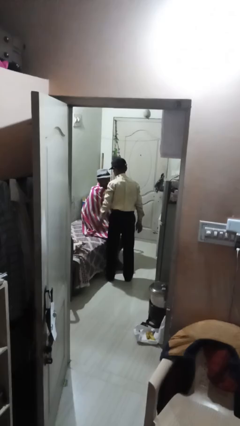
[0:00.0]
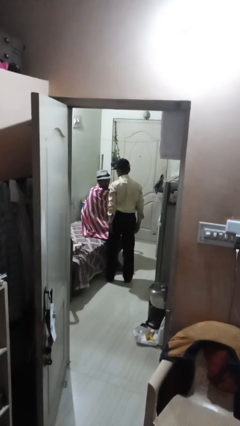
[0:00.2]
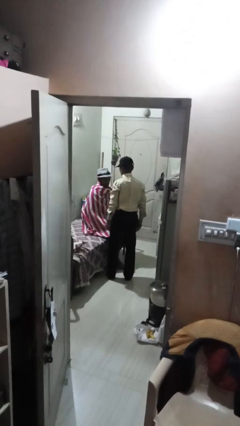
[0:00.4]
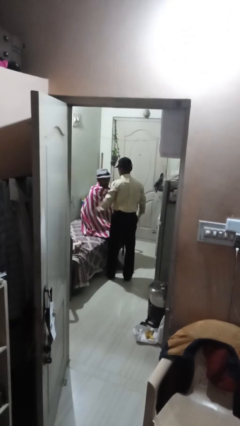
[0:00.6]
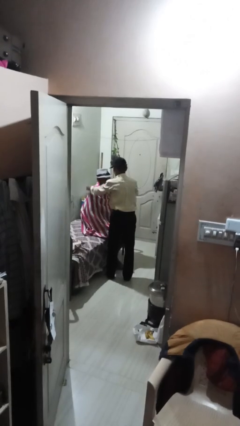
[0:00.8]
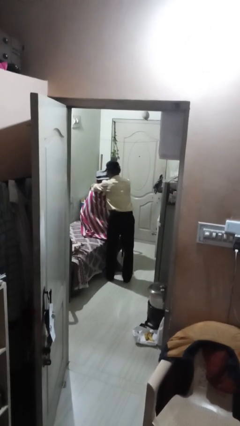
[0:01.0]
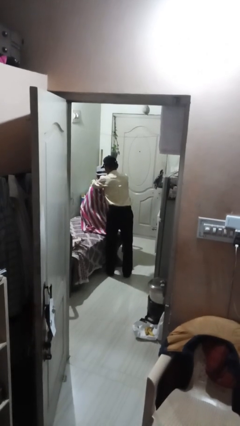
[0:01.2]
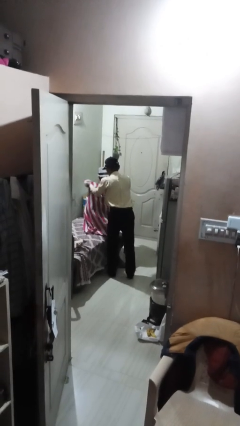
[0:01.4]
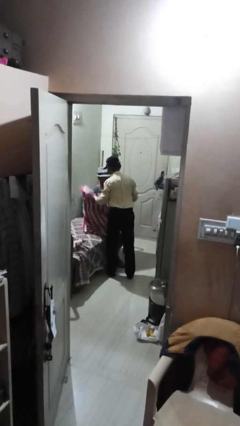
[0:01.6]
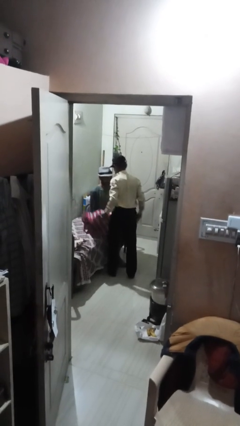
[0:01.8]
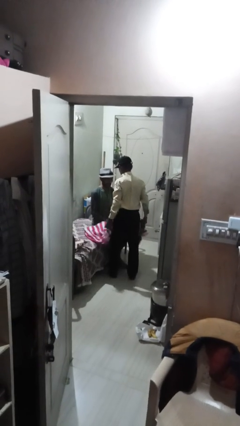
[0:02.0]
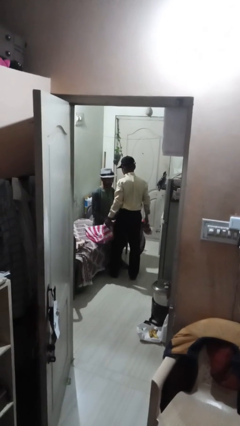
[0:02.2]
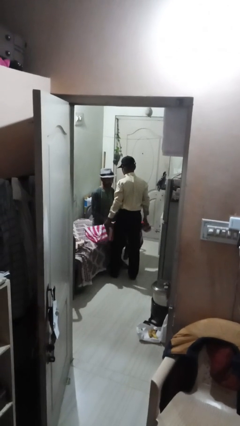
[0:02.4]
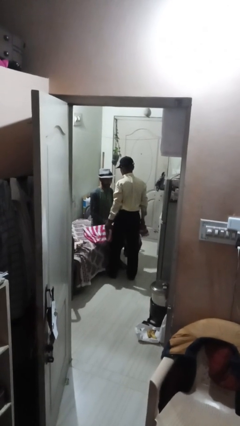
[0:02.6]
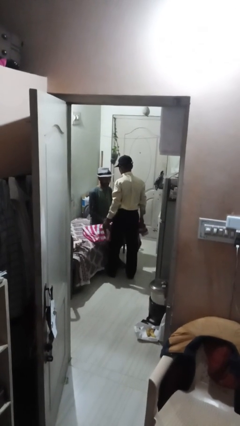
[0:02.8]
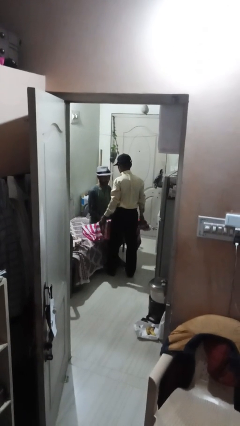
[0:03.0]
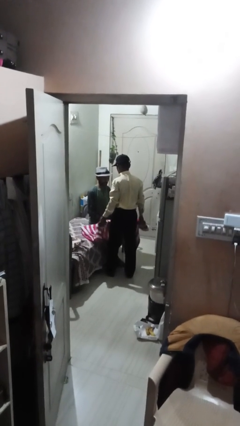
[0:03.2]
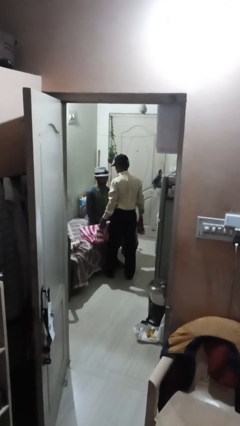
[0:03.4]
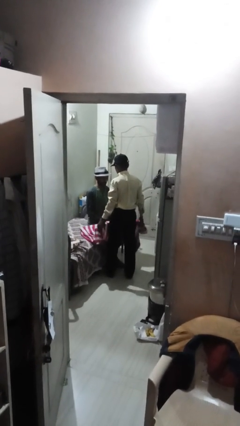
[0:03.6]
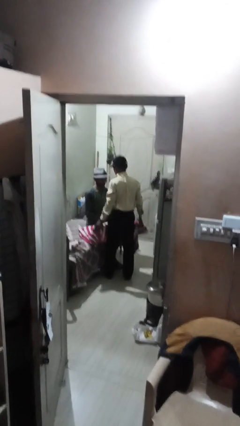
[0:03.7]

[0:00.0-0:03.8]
person uncovers friend with blanket

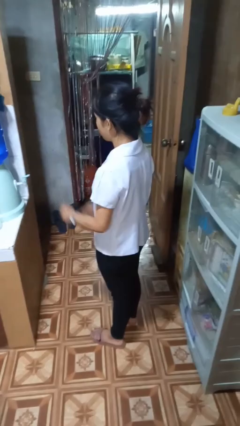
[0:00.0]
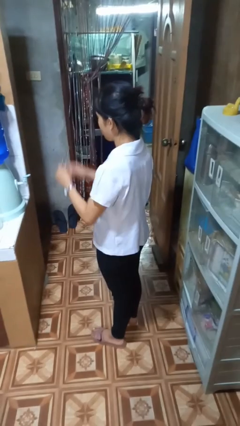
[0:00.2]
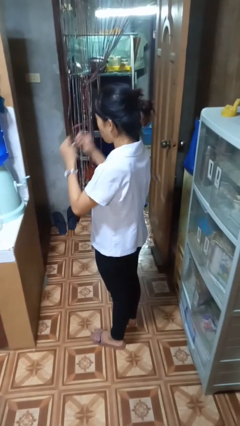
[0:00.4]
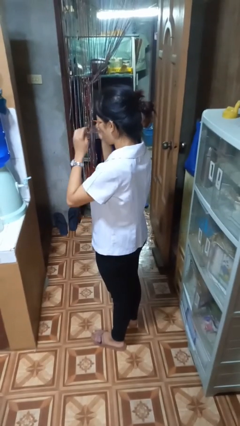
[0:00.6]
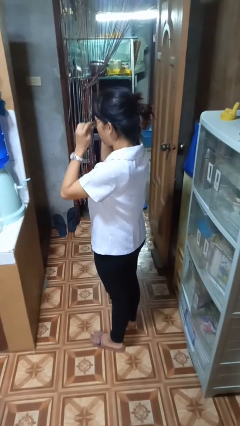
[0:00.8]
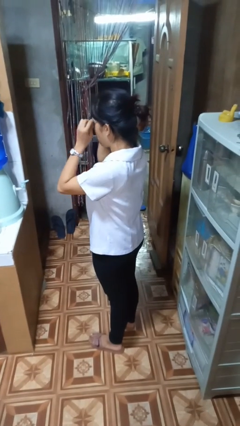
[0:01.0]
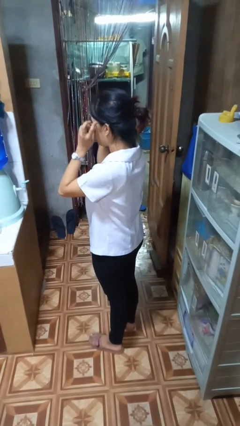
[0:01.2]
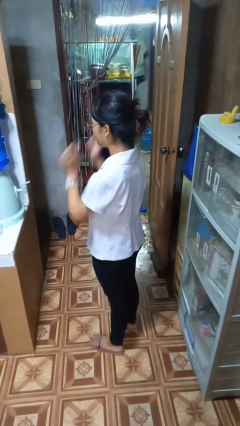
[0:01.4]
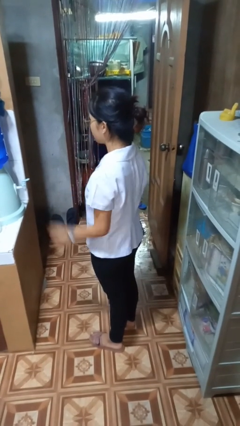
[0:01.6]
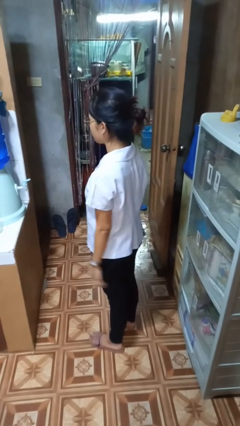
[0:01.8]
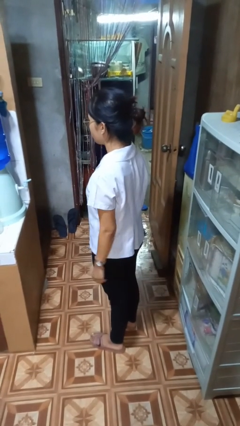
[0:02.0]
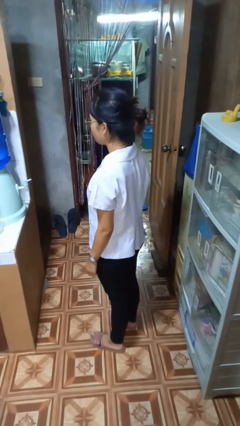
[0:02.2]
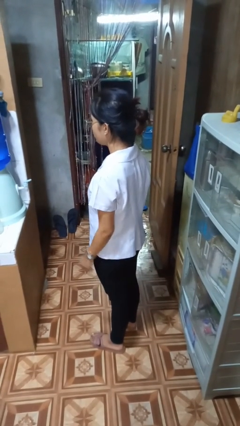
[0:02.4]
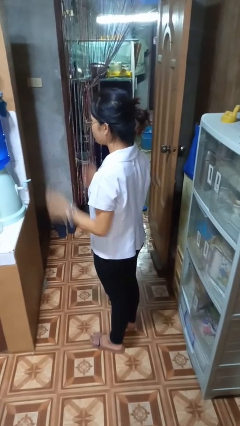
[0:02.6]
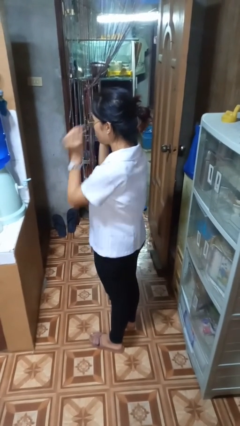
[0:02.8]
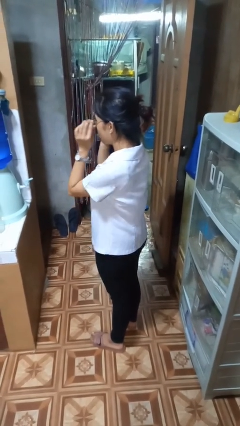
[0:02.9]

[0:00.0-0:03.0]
person puts on glasses

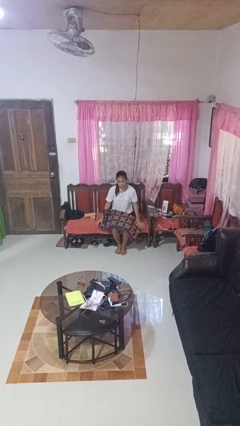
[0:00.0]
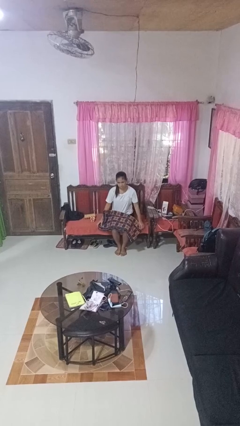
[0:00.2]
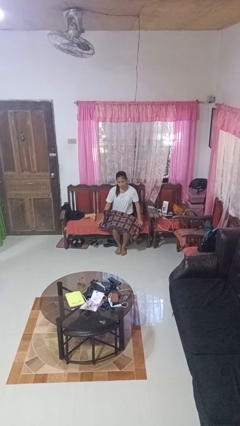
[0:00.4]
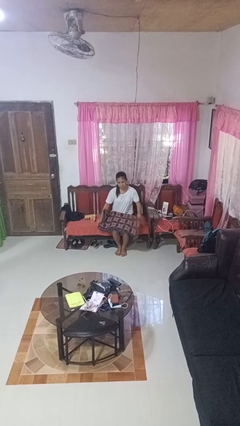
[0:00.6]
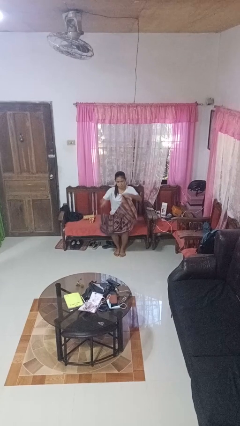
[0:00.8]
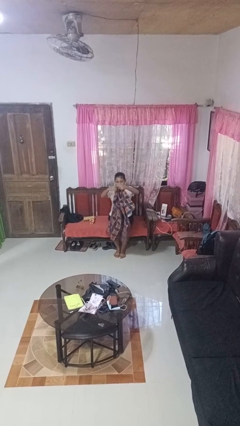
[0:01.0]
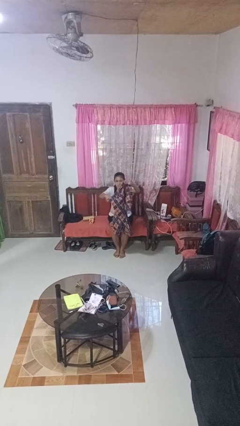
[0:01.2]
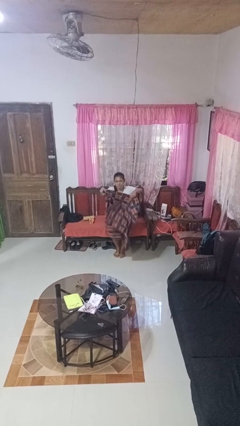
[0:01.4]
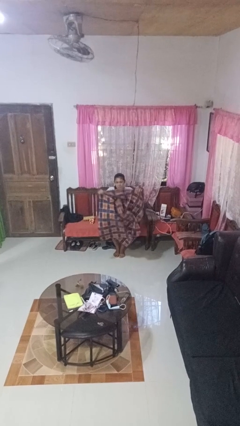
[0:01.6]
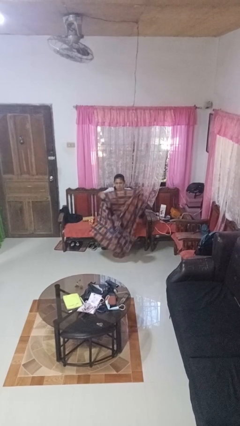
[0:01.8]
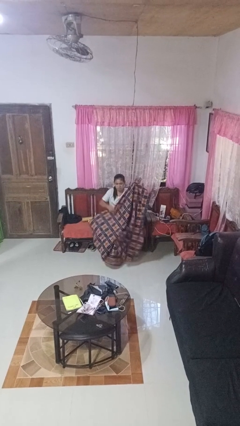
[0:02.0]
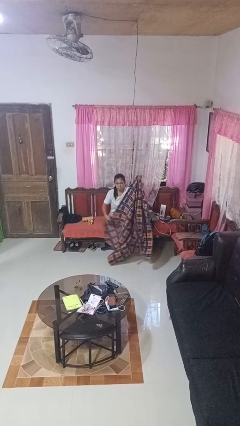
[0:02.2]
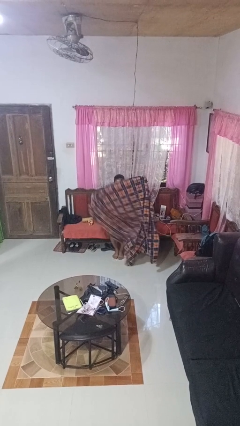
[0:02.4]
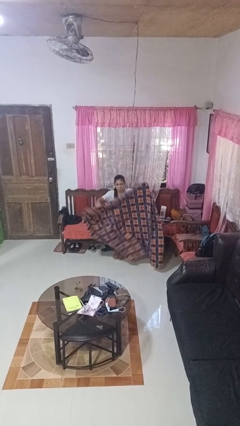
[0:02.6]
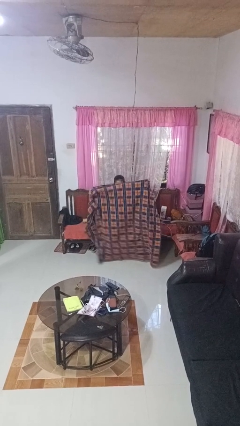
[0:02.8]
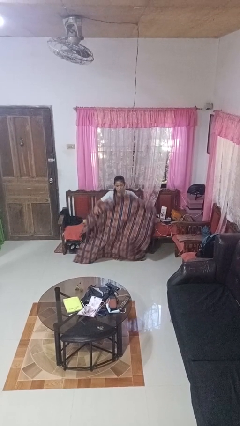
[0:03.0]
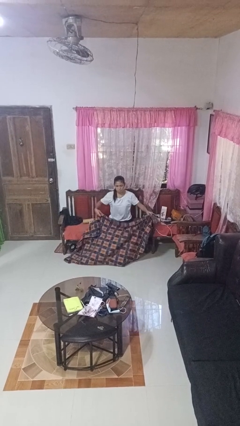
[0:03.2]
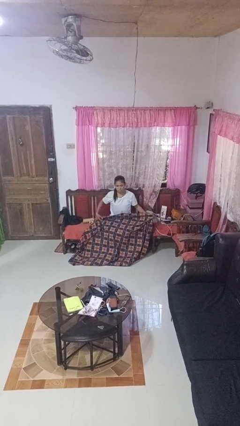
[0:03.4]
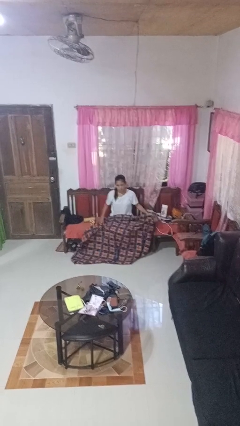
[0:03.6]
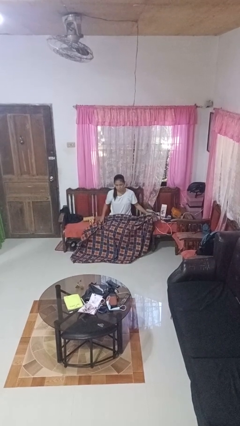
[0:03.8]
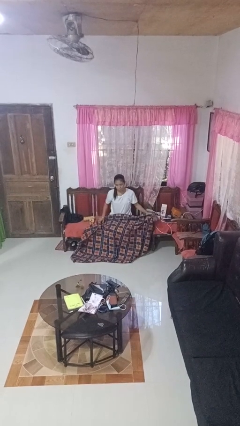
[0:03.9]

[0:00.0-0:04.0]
person unfolds blanket

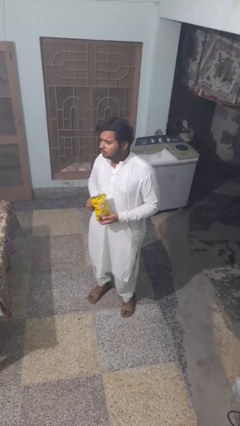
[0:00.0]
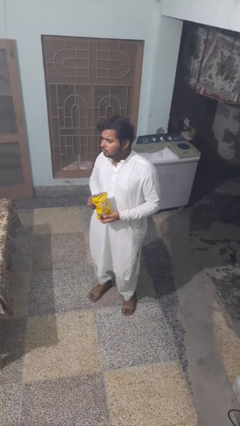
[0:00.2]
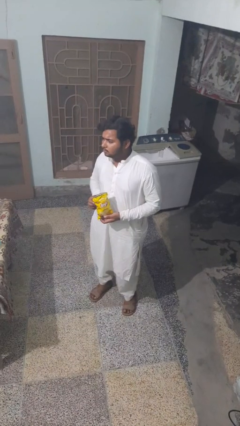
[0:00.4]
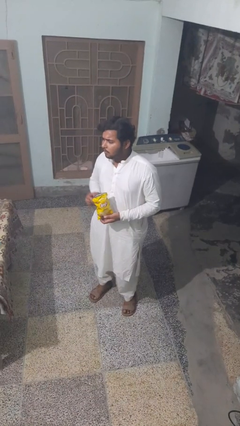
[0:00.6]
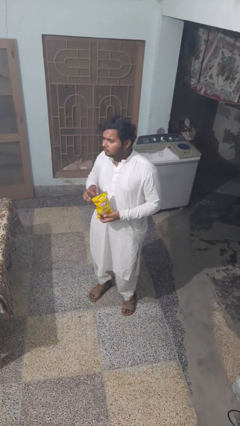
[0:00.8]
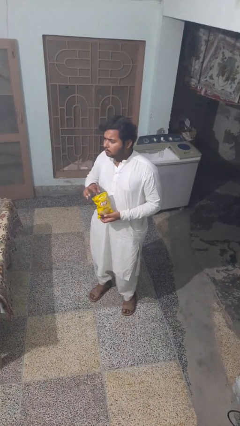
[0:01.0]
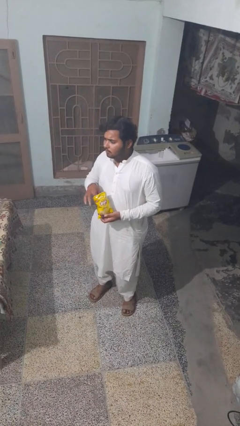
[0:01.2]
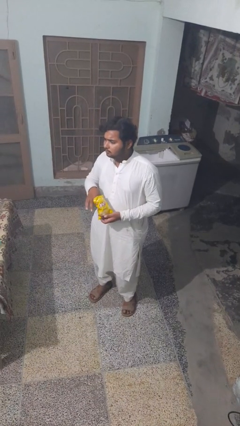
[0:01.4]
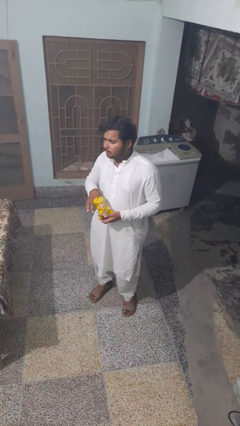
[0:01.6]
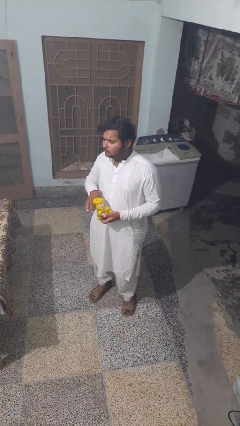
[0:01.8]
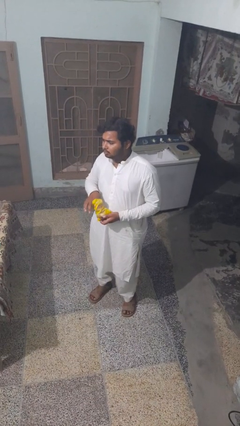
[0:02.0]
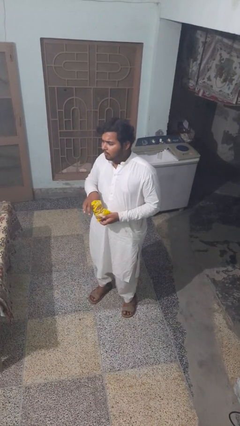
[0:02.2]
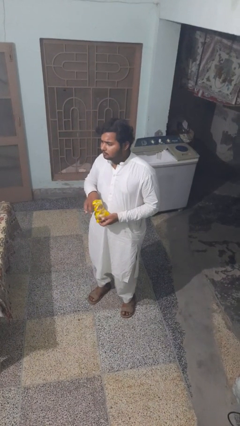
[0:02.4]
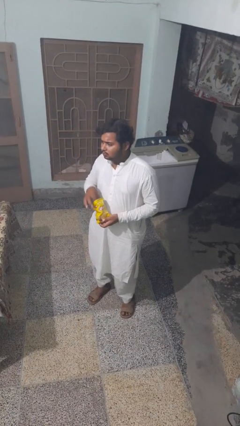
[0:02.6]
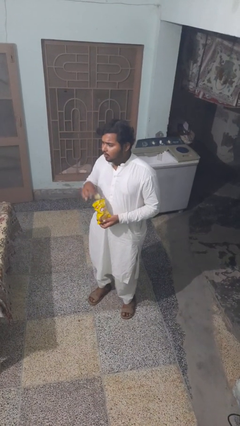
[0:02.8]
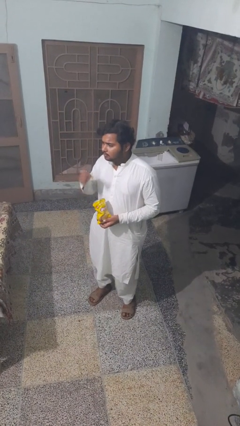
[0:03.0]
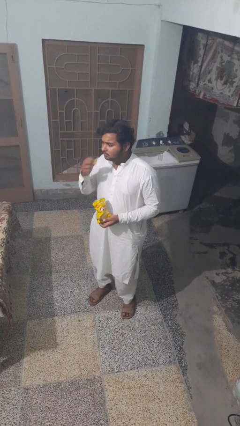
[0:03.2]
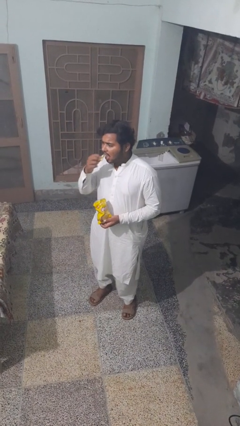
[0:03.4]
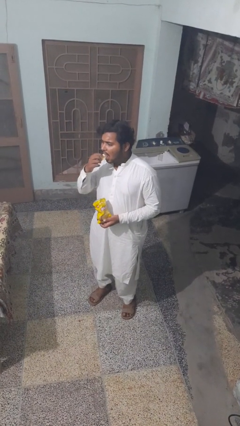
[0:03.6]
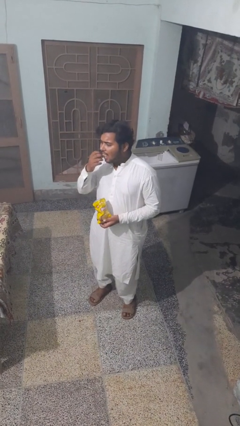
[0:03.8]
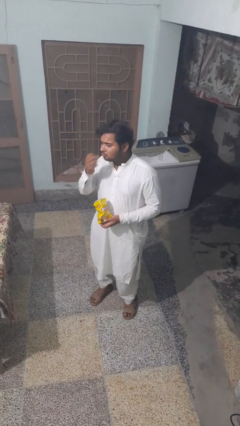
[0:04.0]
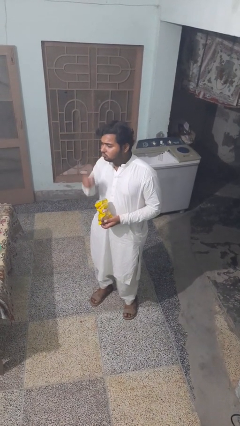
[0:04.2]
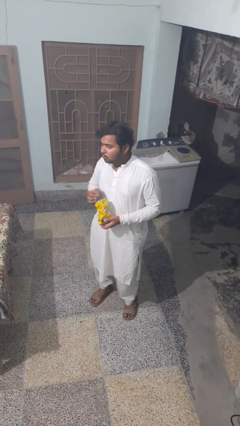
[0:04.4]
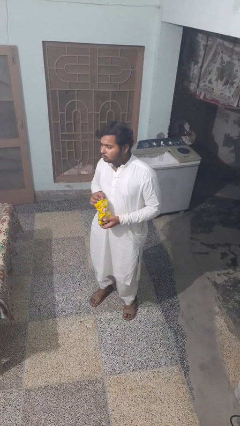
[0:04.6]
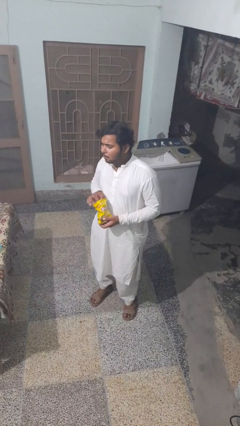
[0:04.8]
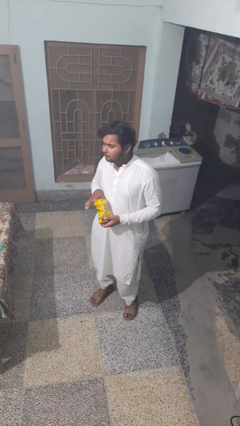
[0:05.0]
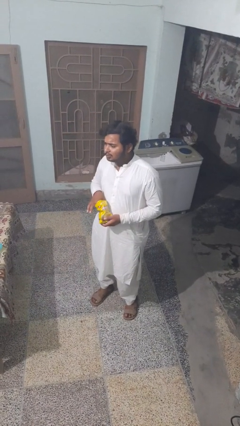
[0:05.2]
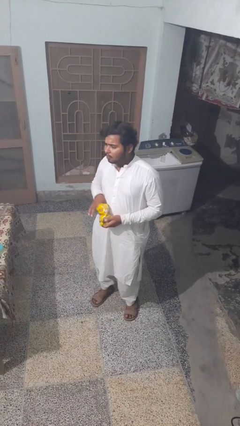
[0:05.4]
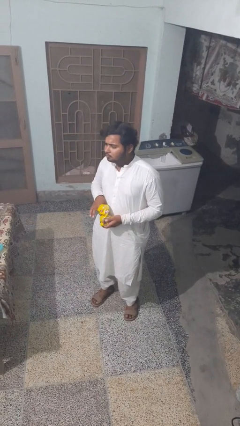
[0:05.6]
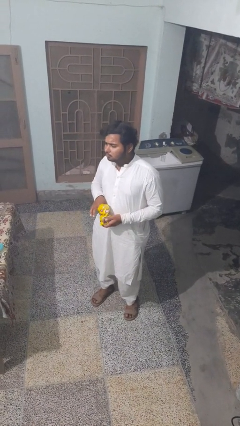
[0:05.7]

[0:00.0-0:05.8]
person eats snack from bag

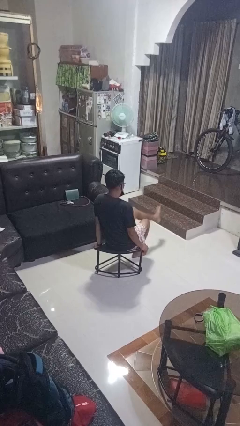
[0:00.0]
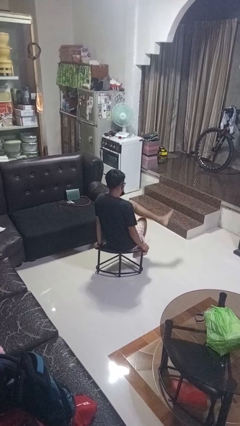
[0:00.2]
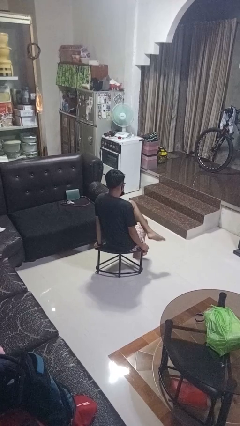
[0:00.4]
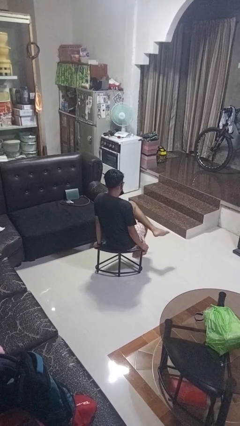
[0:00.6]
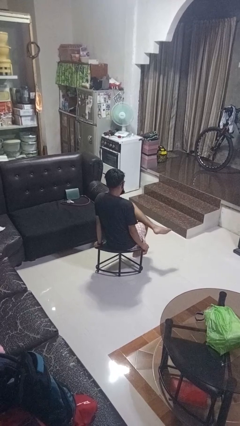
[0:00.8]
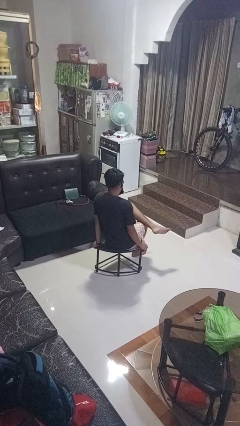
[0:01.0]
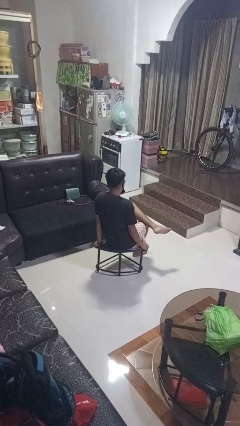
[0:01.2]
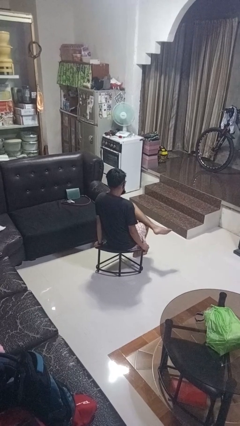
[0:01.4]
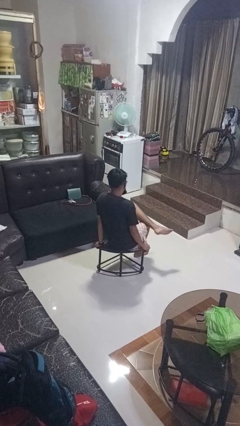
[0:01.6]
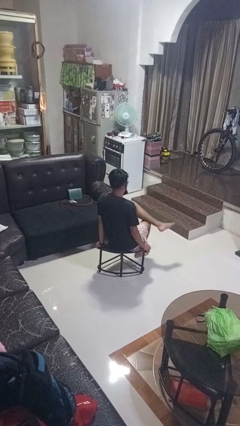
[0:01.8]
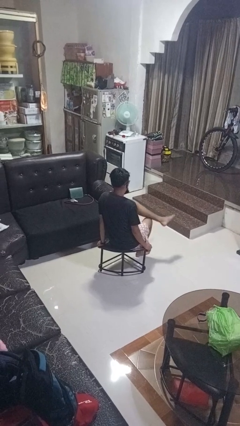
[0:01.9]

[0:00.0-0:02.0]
person crosses legs
